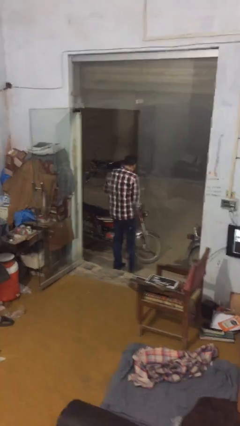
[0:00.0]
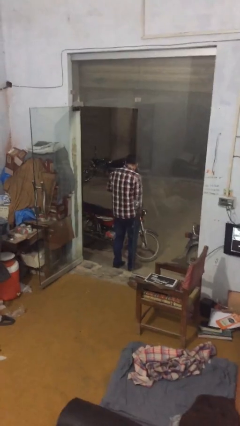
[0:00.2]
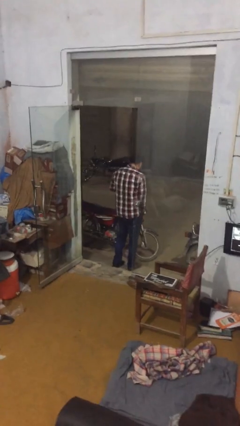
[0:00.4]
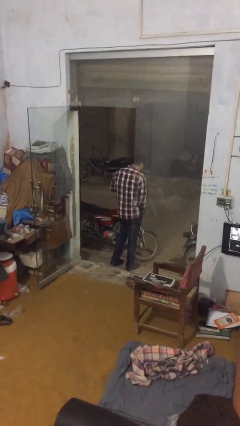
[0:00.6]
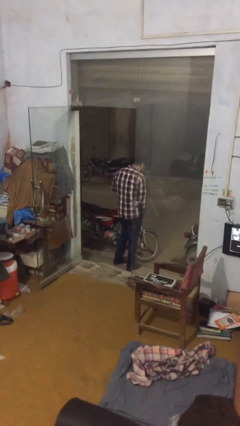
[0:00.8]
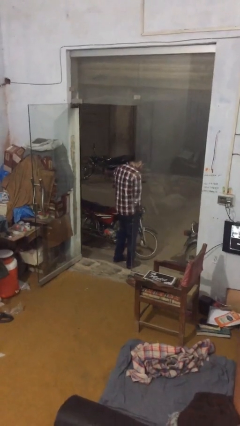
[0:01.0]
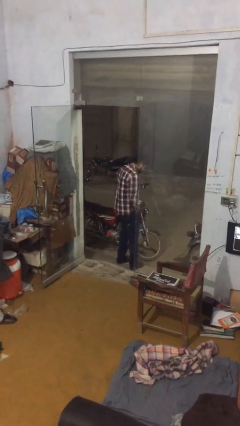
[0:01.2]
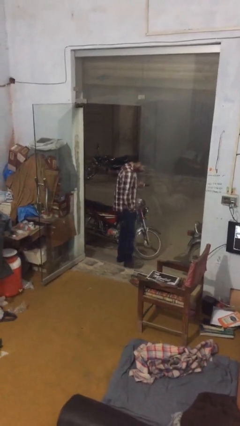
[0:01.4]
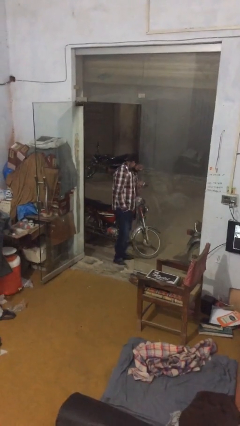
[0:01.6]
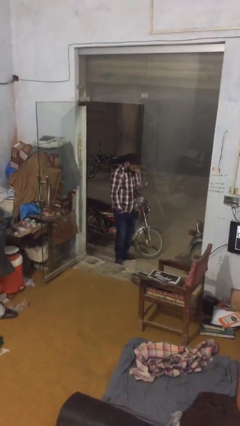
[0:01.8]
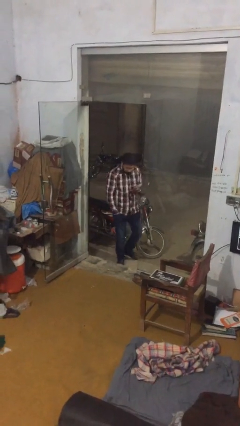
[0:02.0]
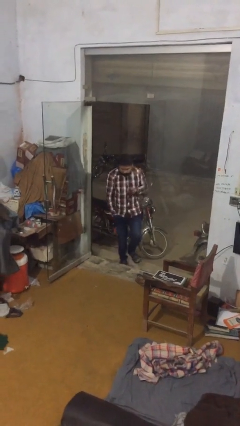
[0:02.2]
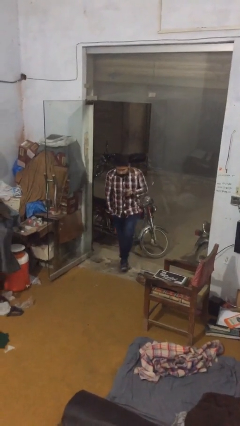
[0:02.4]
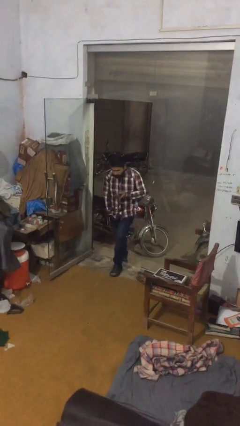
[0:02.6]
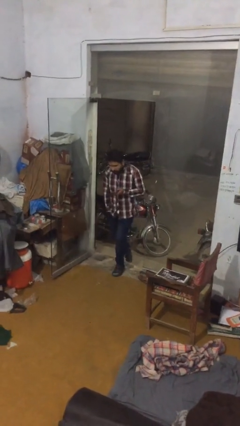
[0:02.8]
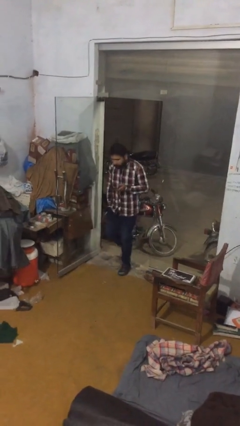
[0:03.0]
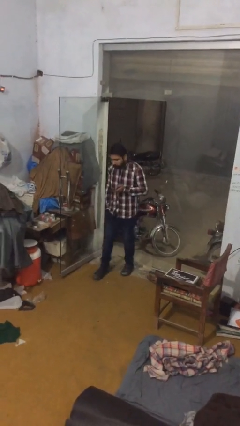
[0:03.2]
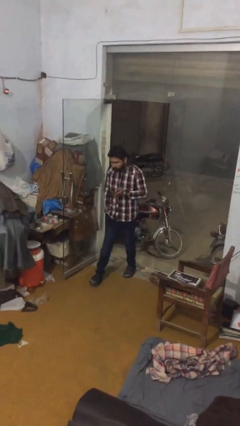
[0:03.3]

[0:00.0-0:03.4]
person enters scene through structure

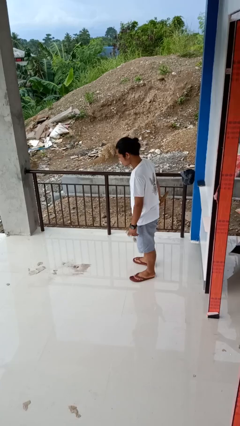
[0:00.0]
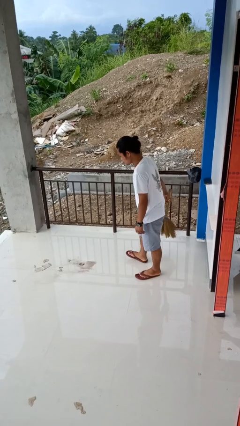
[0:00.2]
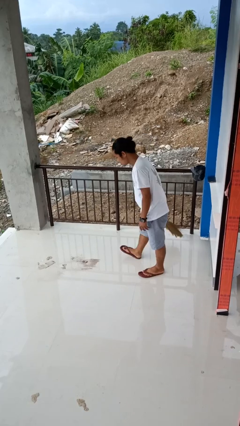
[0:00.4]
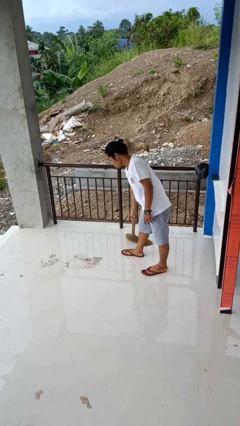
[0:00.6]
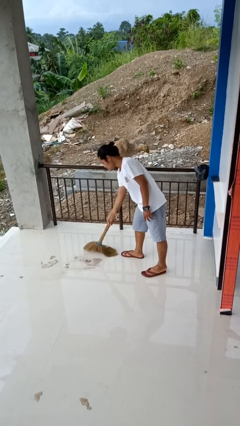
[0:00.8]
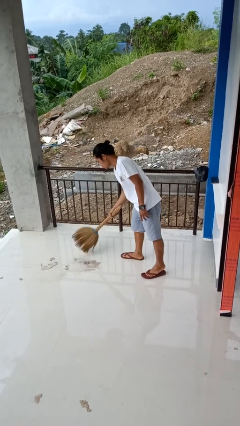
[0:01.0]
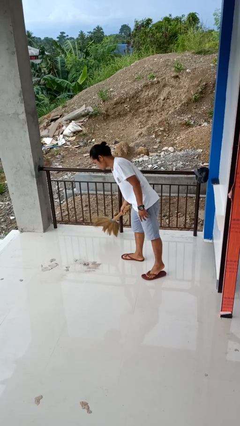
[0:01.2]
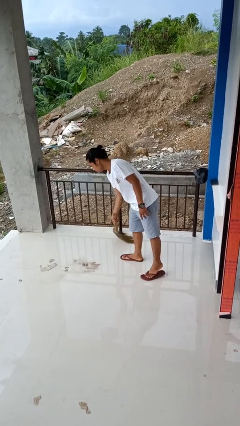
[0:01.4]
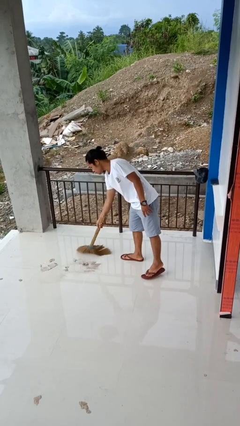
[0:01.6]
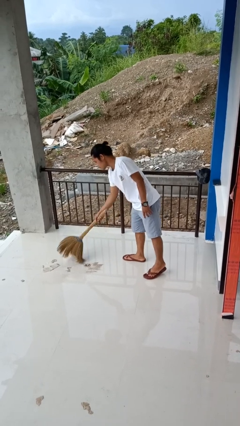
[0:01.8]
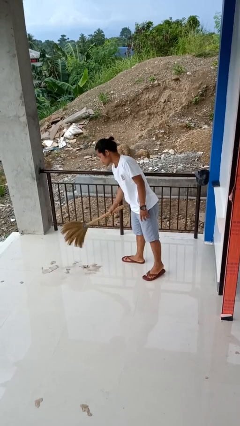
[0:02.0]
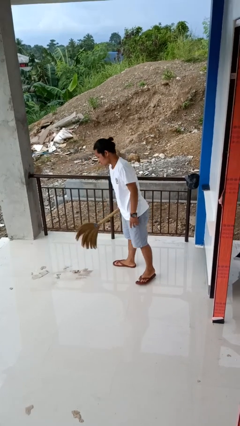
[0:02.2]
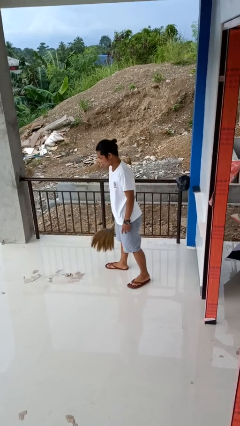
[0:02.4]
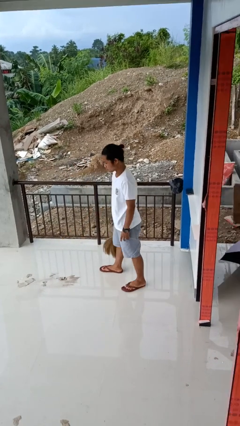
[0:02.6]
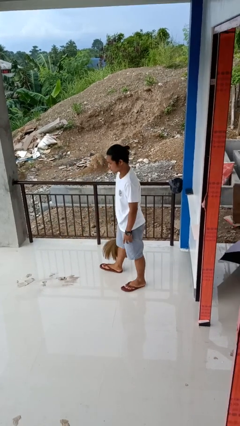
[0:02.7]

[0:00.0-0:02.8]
person sweeps floor

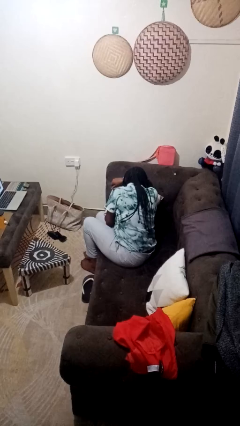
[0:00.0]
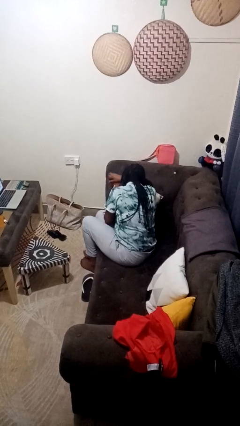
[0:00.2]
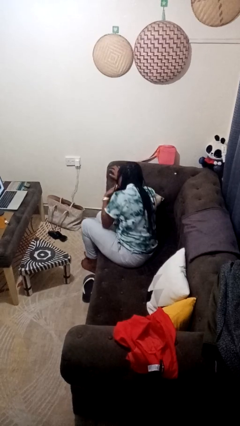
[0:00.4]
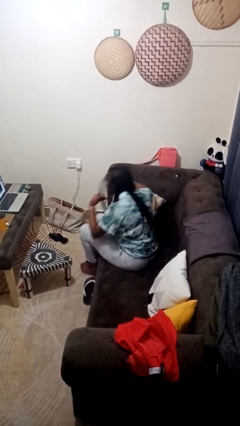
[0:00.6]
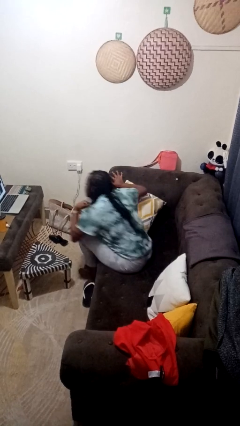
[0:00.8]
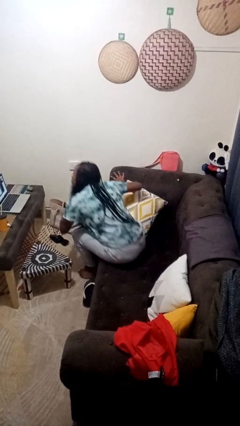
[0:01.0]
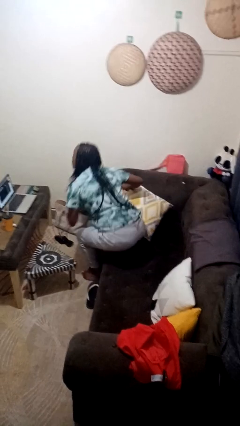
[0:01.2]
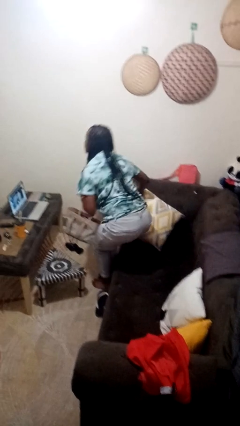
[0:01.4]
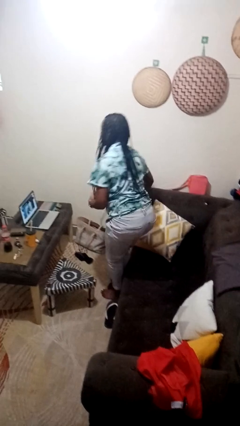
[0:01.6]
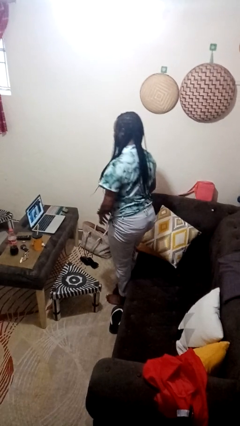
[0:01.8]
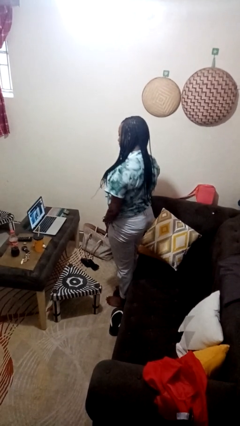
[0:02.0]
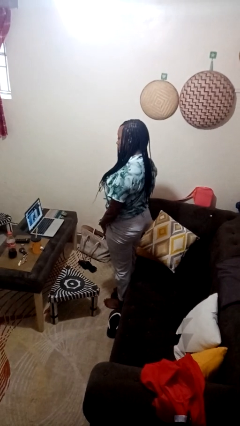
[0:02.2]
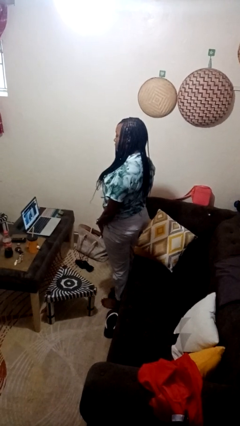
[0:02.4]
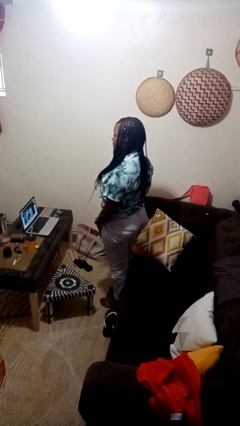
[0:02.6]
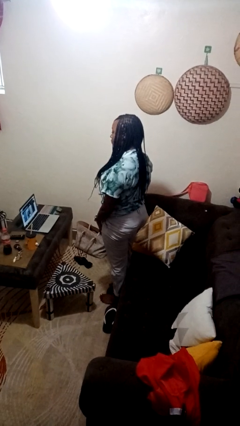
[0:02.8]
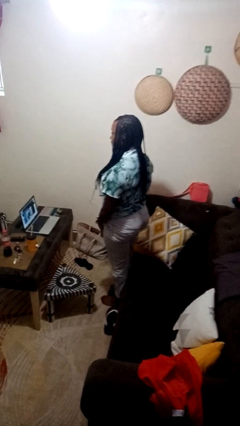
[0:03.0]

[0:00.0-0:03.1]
person stands up

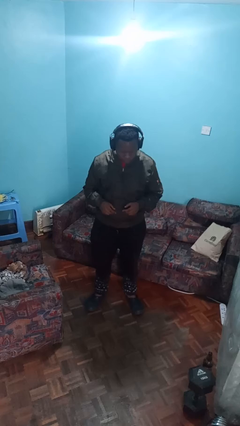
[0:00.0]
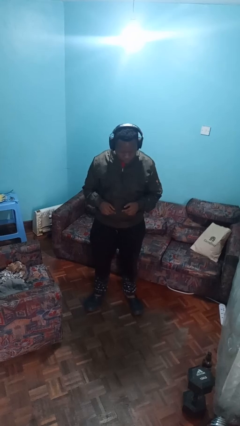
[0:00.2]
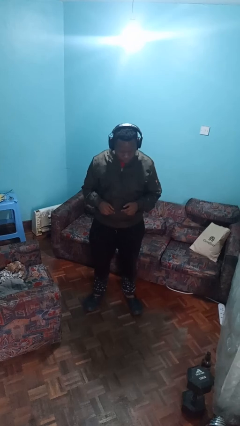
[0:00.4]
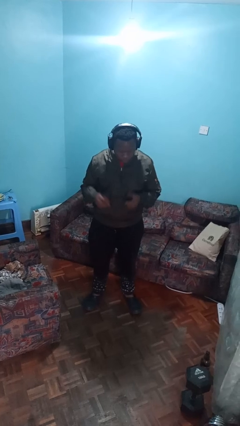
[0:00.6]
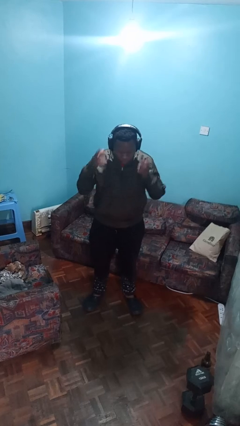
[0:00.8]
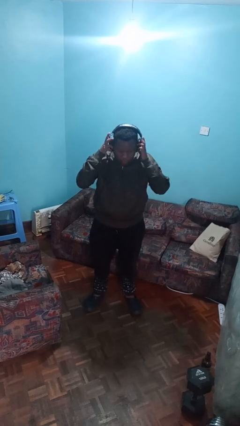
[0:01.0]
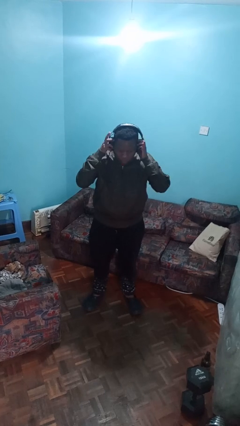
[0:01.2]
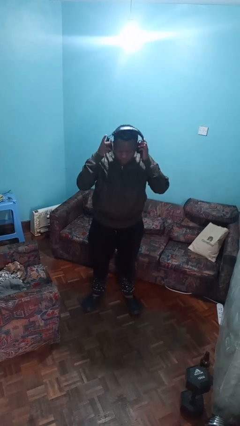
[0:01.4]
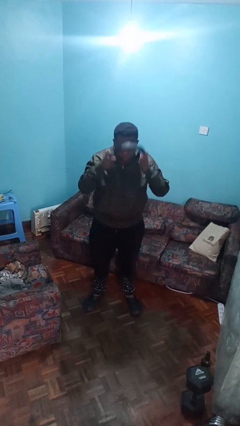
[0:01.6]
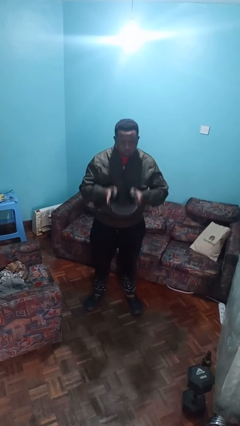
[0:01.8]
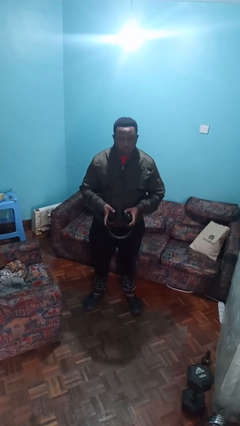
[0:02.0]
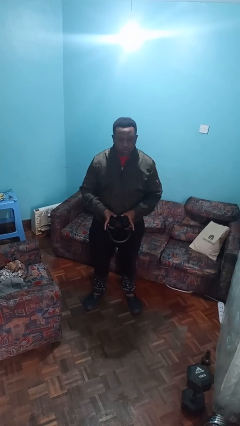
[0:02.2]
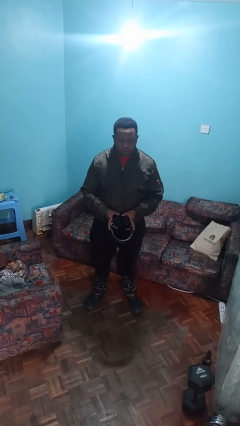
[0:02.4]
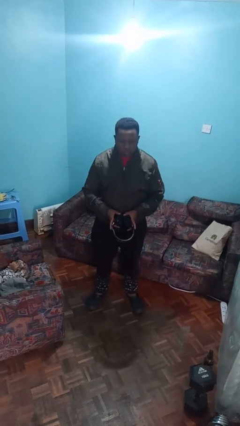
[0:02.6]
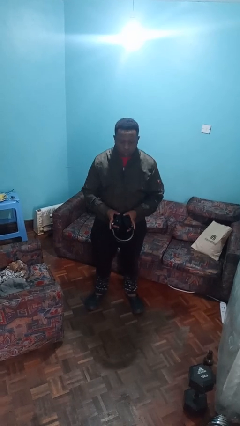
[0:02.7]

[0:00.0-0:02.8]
person takes off headphones

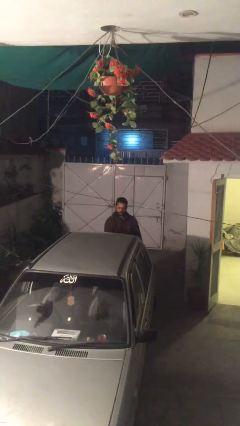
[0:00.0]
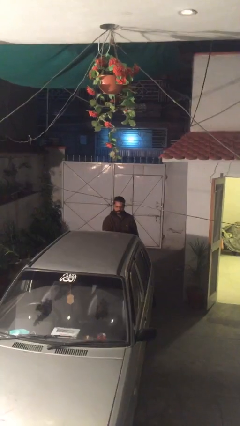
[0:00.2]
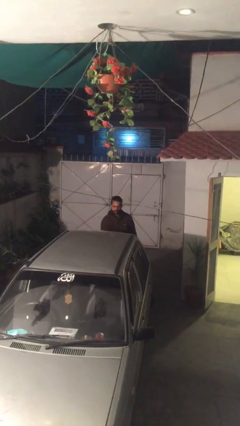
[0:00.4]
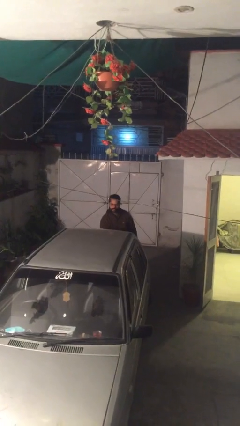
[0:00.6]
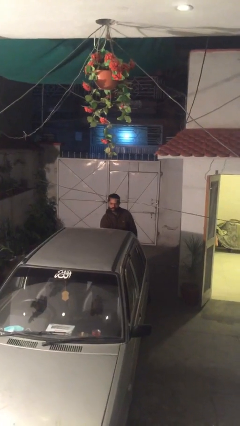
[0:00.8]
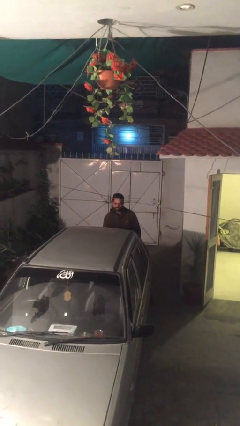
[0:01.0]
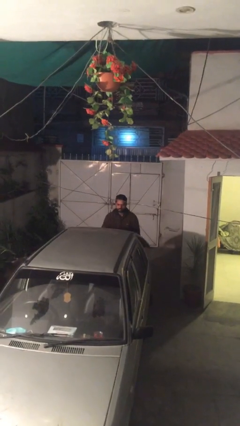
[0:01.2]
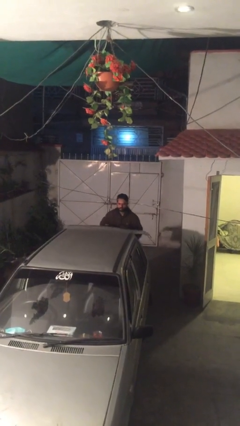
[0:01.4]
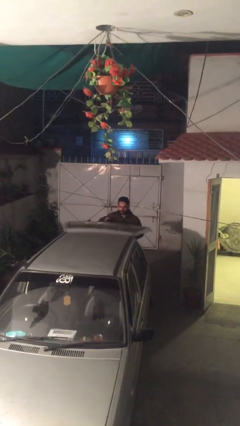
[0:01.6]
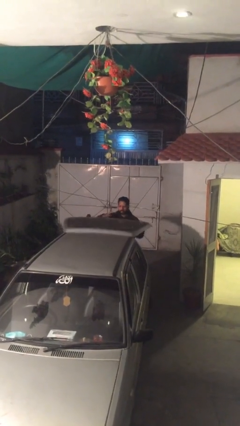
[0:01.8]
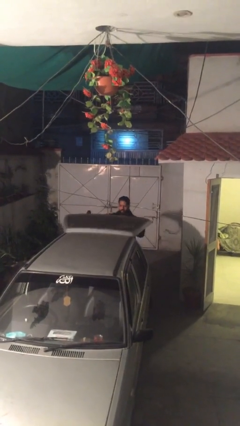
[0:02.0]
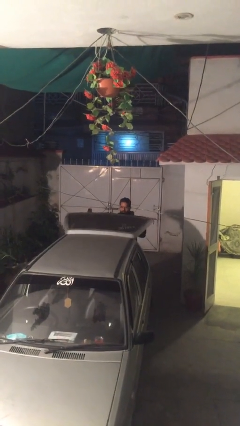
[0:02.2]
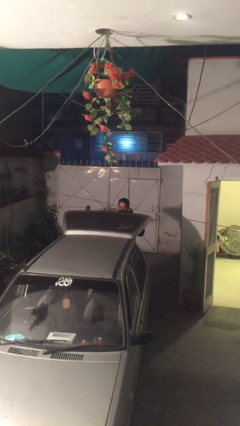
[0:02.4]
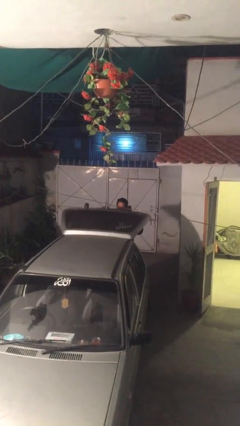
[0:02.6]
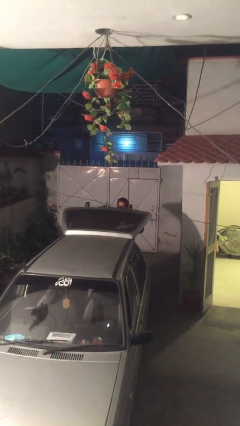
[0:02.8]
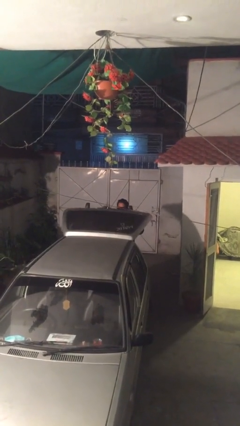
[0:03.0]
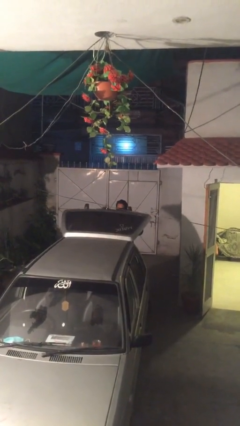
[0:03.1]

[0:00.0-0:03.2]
person opens car trunk

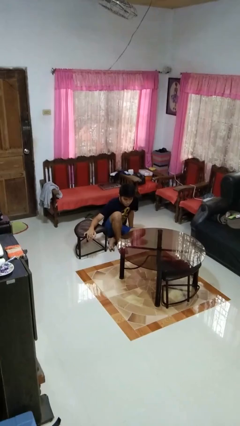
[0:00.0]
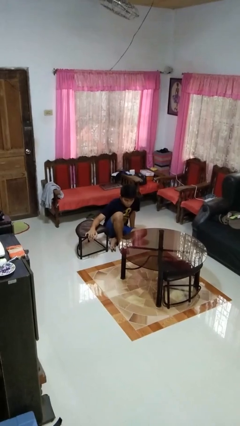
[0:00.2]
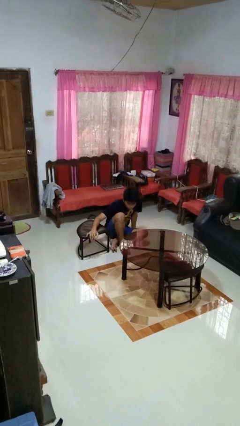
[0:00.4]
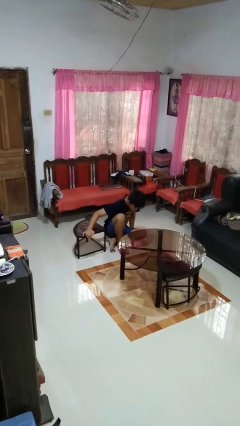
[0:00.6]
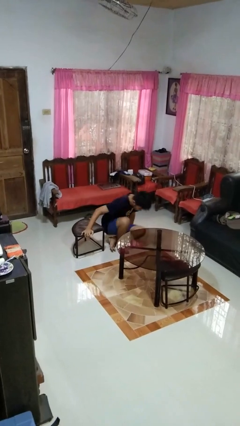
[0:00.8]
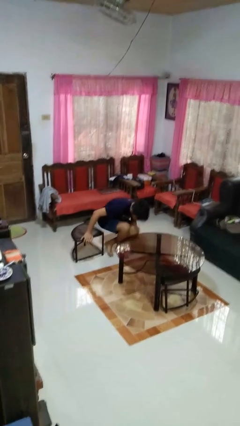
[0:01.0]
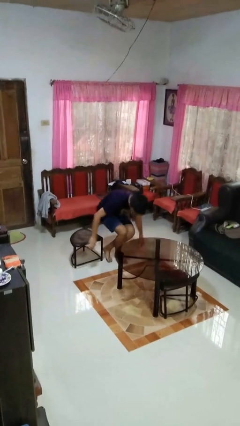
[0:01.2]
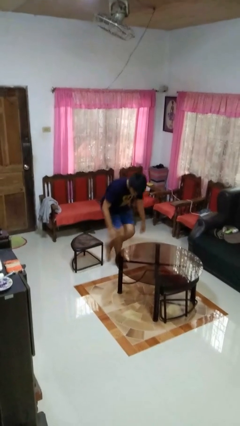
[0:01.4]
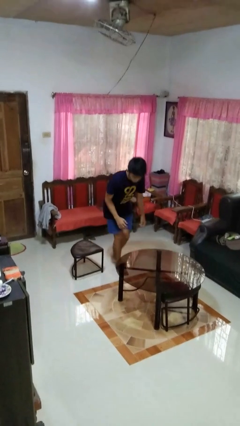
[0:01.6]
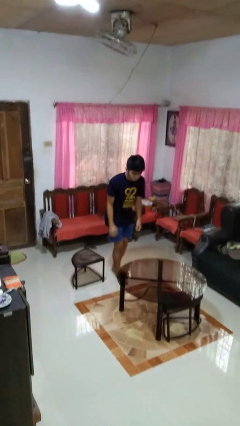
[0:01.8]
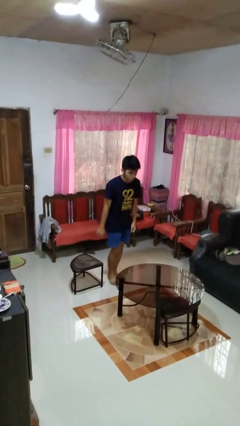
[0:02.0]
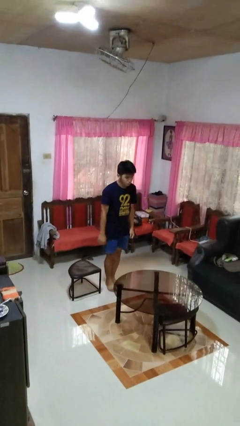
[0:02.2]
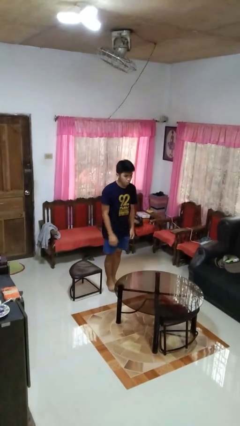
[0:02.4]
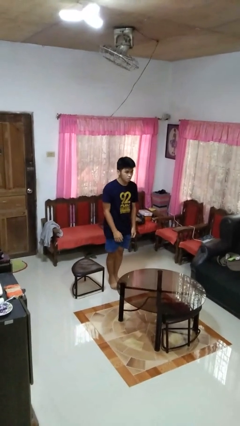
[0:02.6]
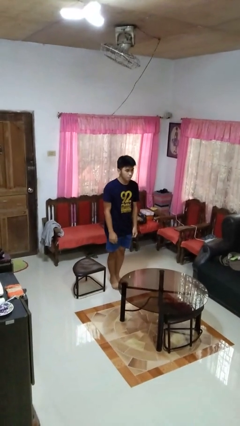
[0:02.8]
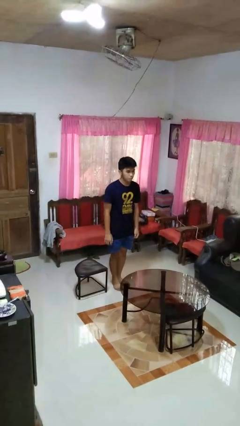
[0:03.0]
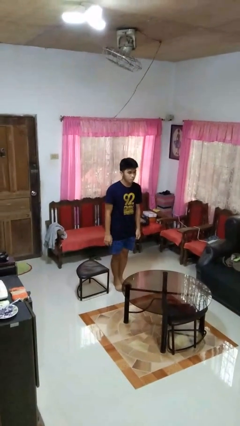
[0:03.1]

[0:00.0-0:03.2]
person stands up from floor
